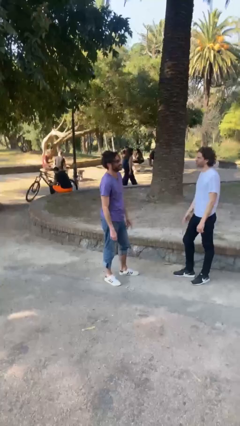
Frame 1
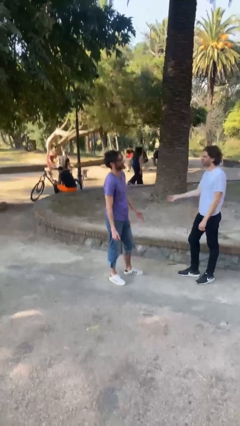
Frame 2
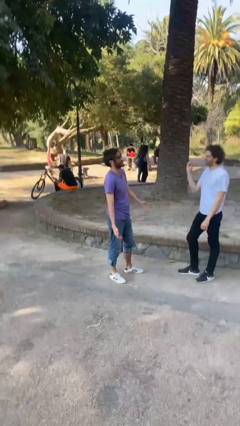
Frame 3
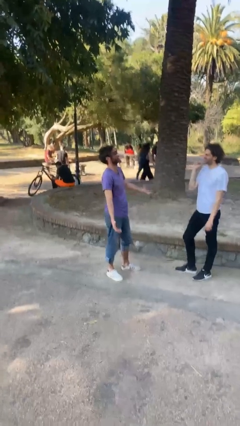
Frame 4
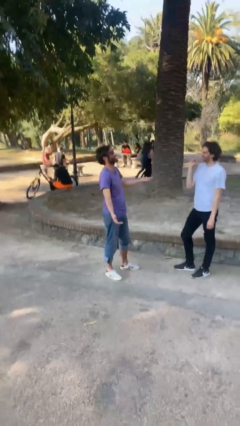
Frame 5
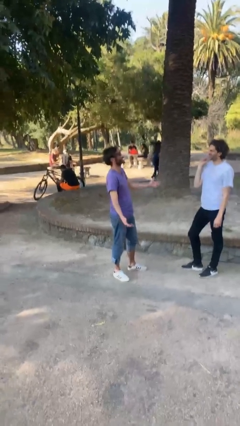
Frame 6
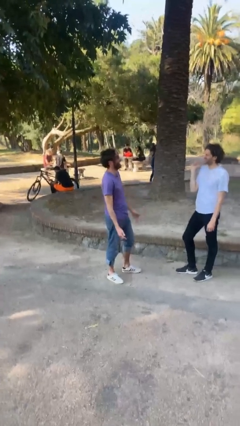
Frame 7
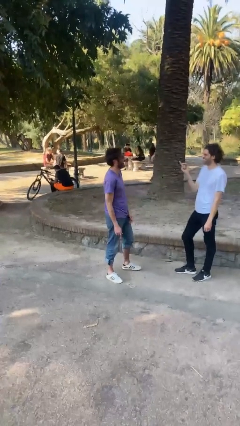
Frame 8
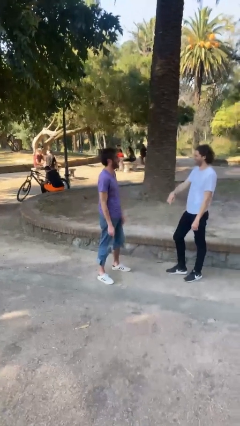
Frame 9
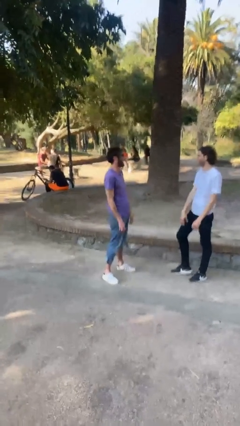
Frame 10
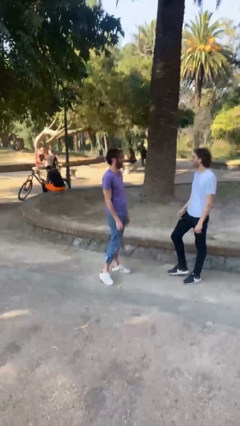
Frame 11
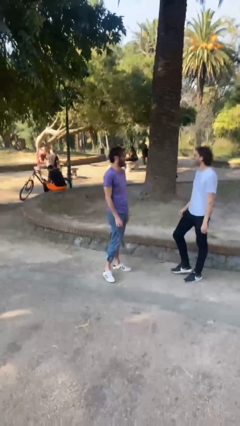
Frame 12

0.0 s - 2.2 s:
person laughs with person

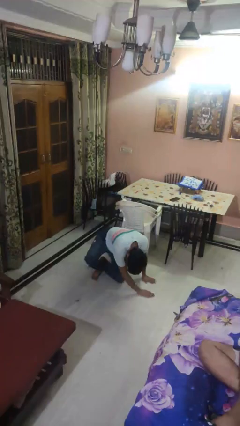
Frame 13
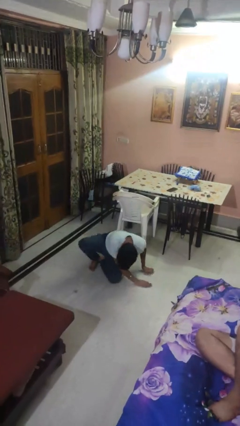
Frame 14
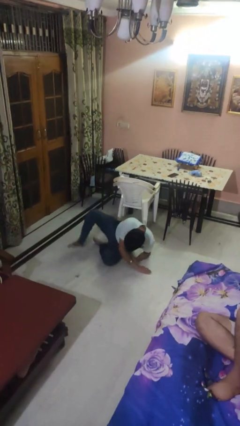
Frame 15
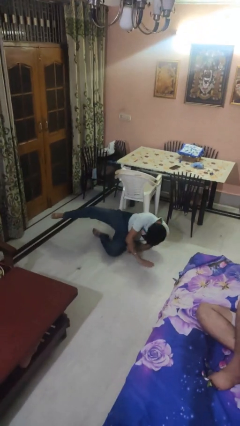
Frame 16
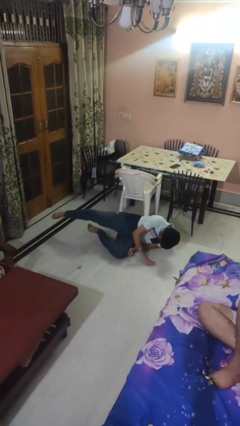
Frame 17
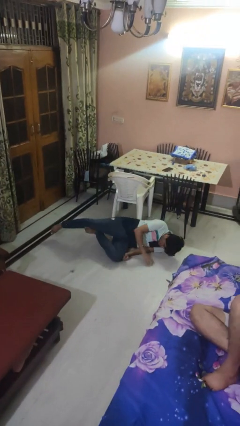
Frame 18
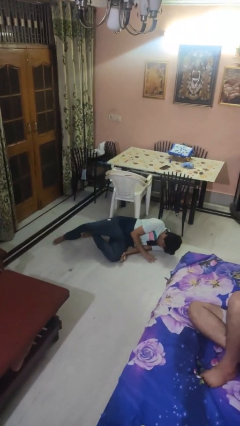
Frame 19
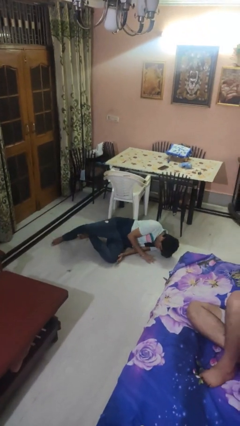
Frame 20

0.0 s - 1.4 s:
person lies down on floor

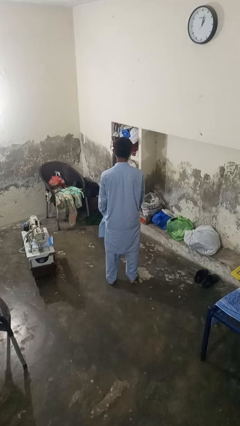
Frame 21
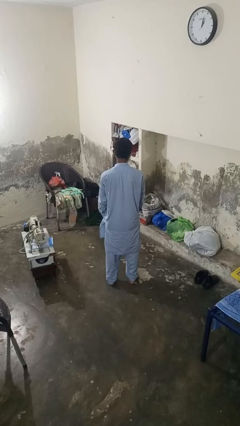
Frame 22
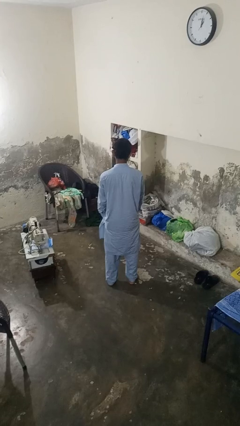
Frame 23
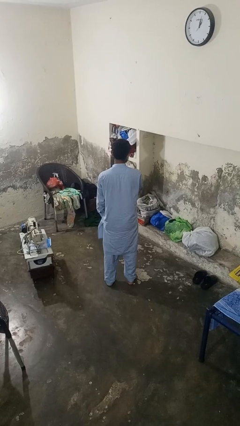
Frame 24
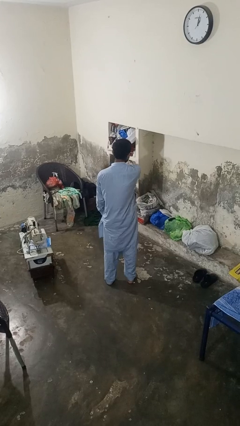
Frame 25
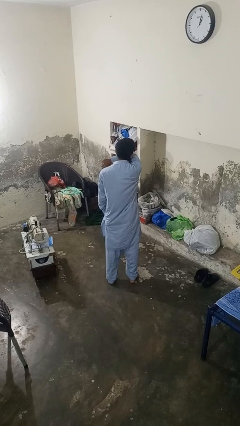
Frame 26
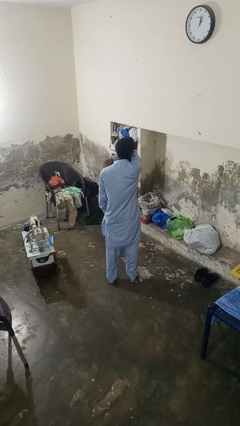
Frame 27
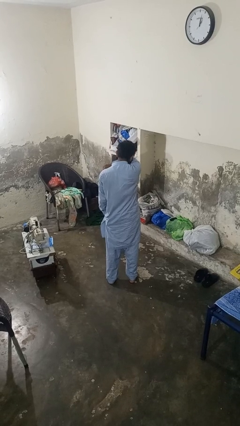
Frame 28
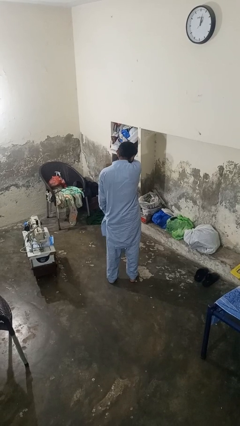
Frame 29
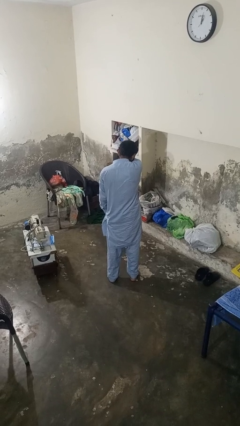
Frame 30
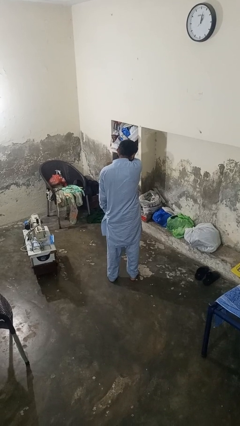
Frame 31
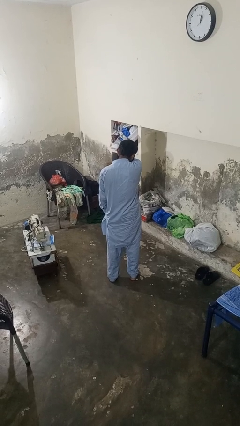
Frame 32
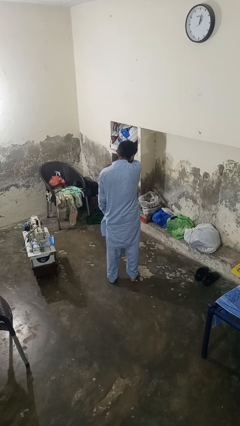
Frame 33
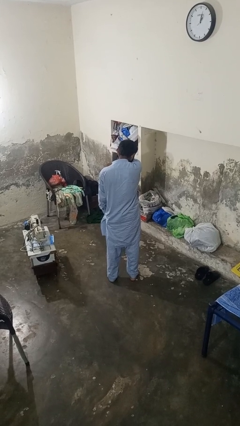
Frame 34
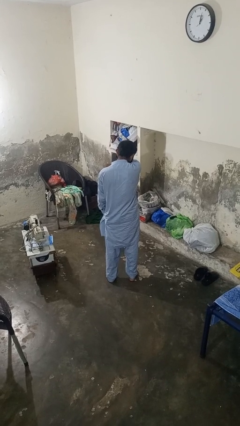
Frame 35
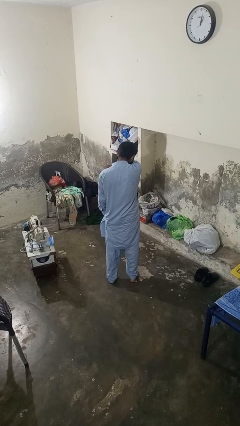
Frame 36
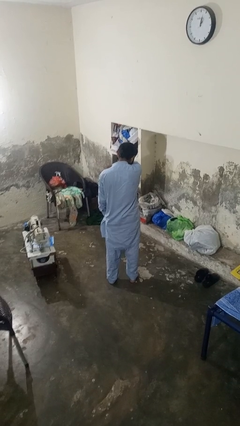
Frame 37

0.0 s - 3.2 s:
person sneezes into arm

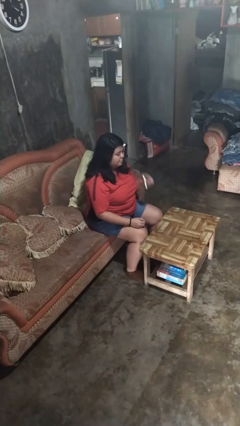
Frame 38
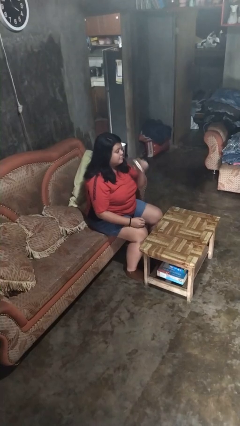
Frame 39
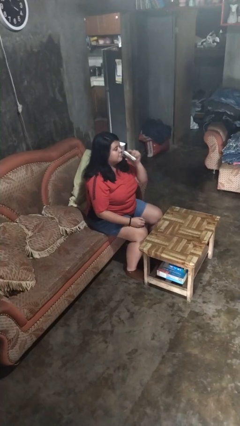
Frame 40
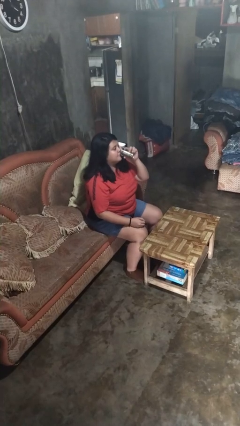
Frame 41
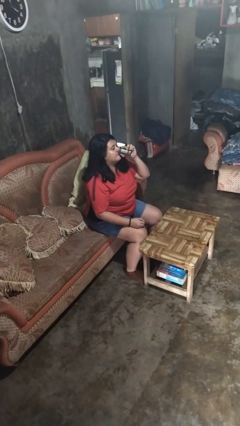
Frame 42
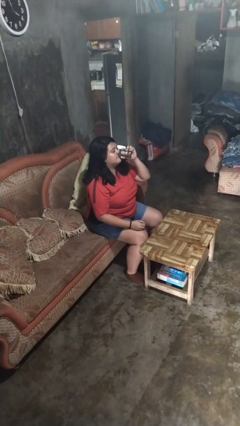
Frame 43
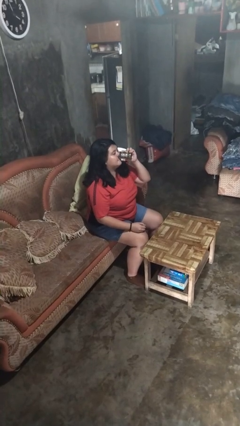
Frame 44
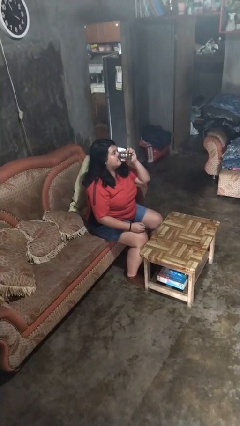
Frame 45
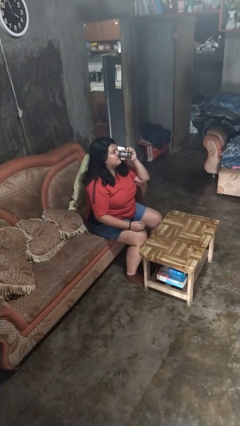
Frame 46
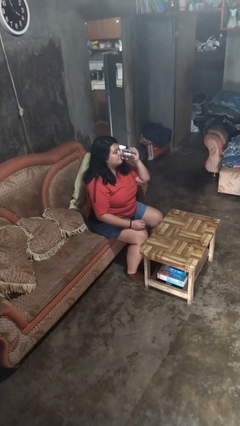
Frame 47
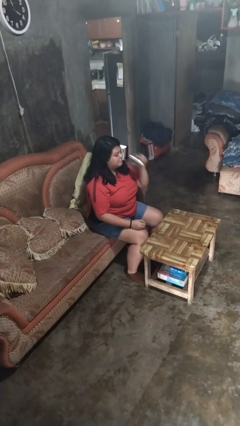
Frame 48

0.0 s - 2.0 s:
person drinks from beverage can

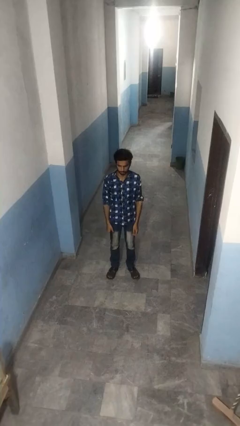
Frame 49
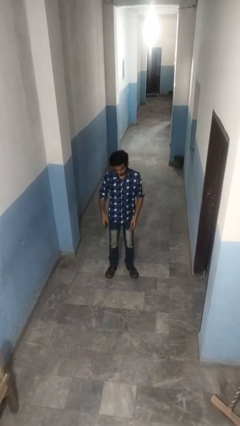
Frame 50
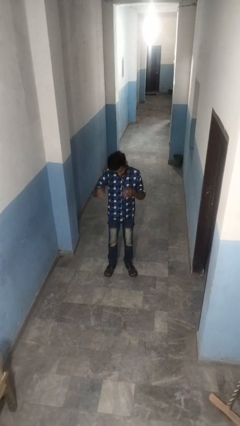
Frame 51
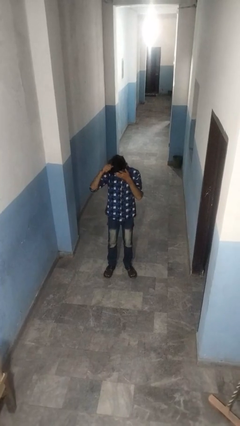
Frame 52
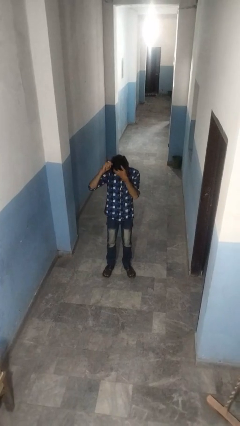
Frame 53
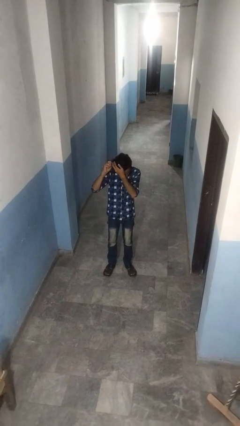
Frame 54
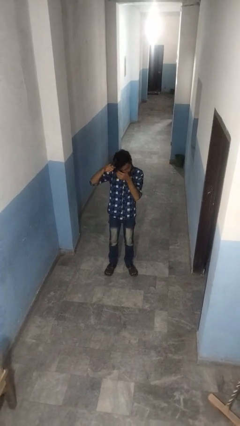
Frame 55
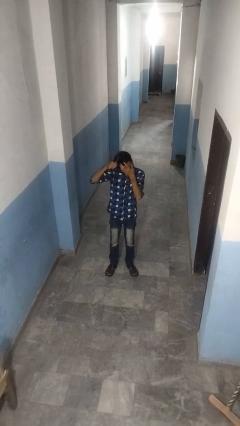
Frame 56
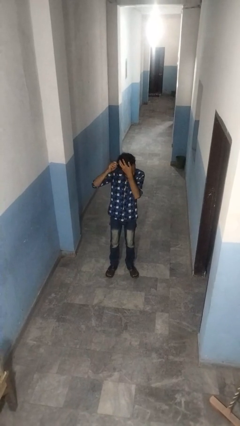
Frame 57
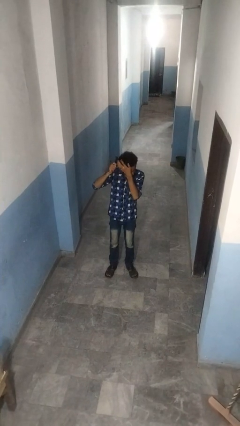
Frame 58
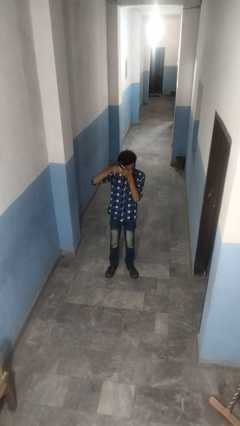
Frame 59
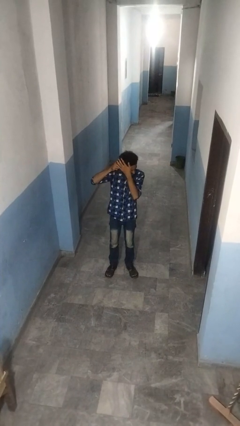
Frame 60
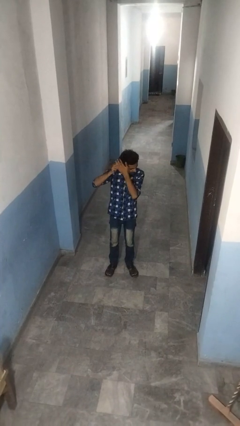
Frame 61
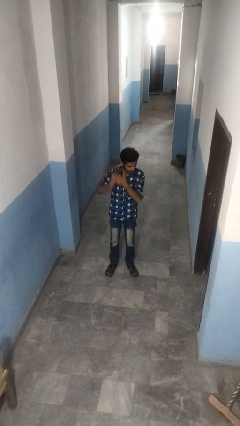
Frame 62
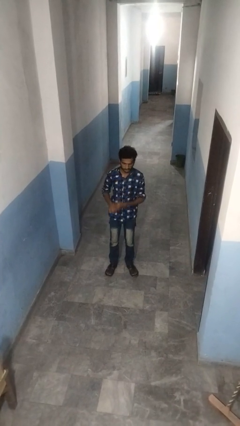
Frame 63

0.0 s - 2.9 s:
person brushes hair

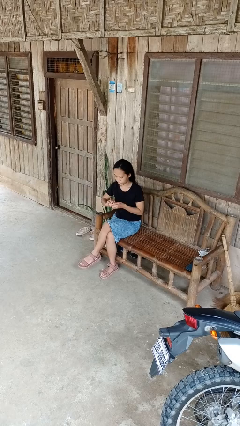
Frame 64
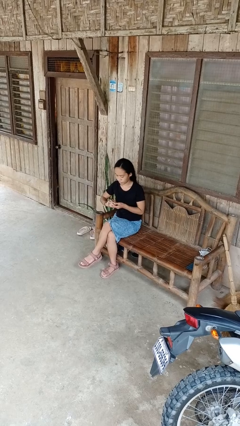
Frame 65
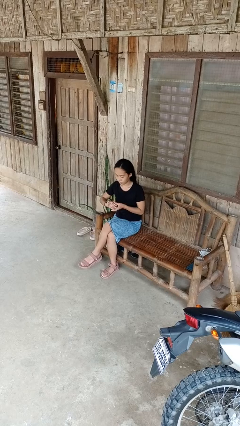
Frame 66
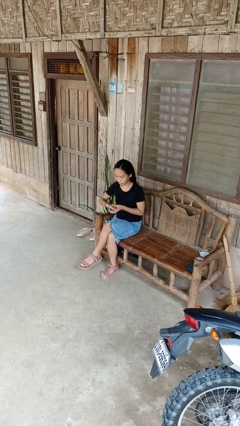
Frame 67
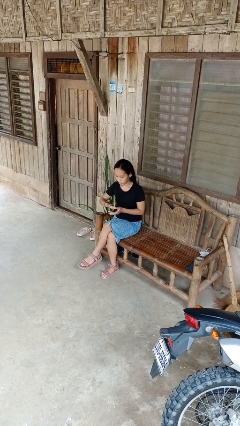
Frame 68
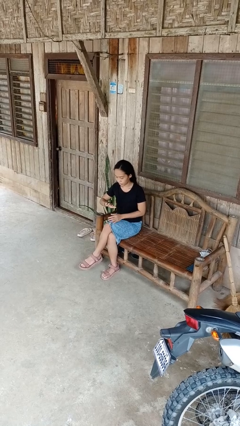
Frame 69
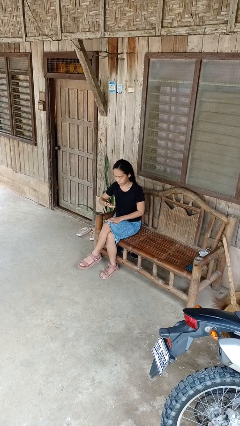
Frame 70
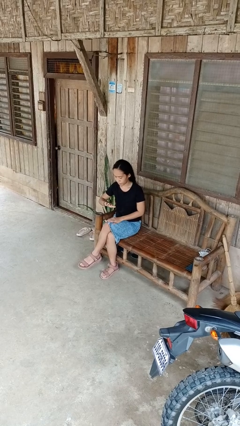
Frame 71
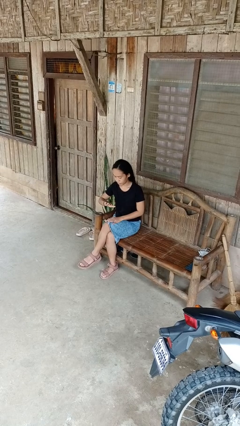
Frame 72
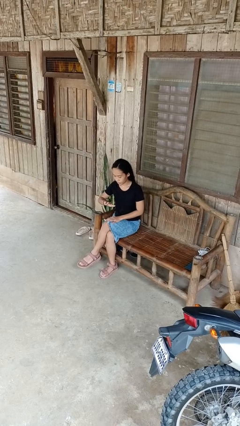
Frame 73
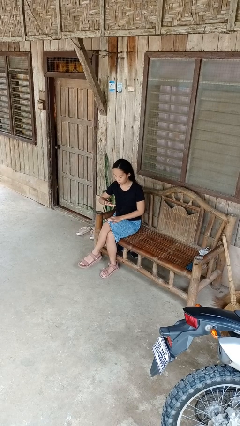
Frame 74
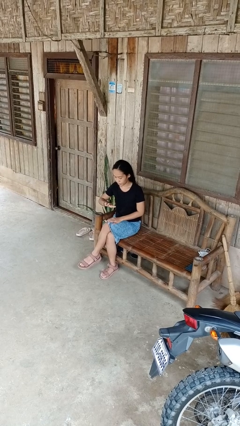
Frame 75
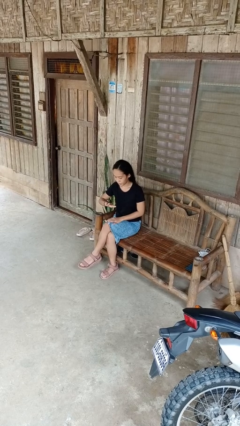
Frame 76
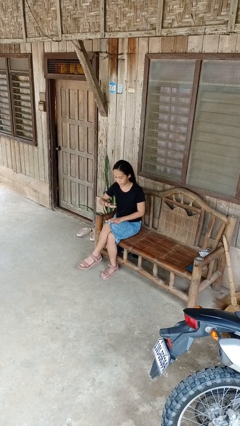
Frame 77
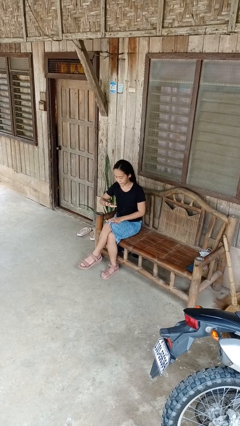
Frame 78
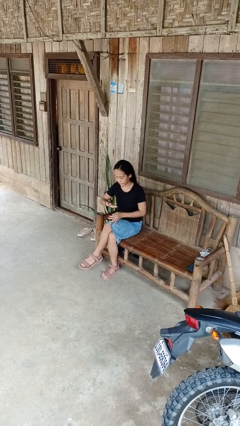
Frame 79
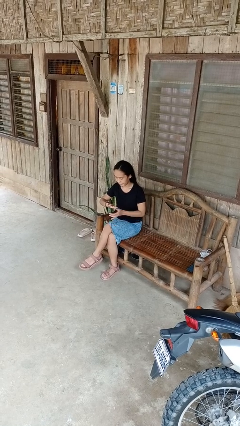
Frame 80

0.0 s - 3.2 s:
person puts on ring

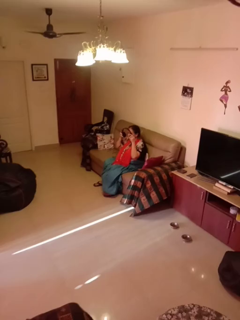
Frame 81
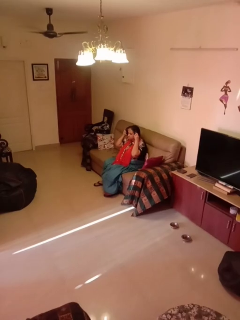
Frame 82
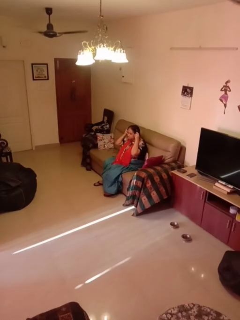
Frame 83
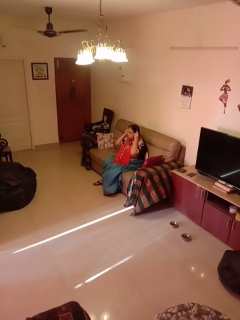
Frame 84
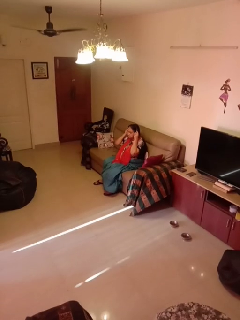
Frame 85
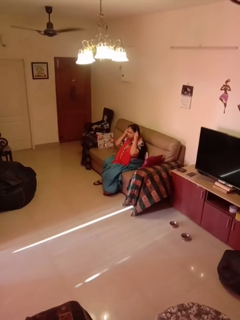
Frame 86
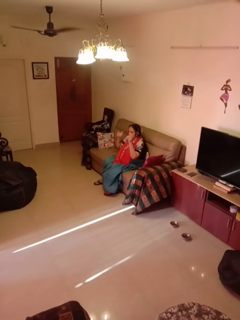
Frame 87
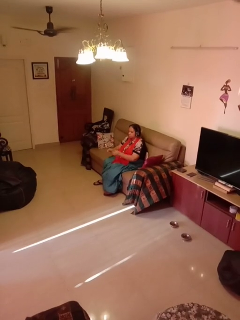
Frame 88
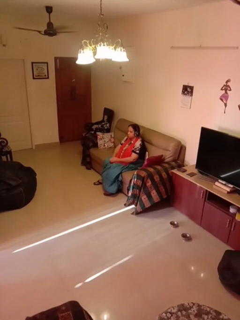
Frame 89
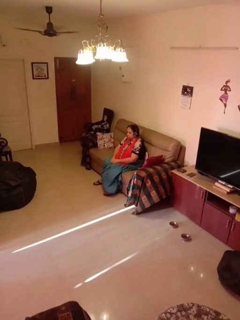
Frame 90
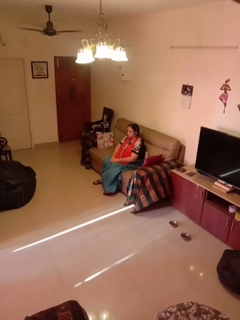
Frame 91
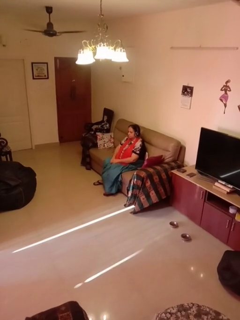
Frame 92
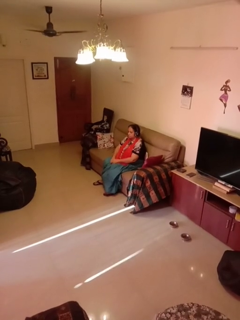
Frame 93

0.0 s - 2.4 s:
person puts on headphones

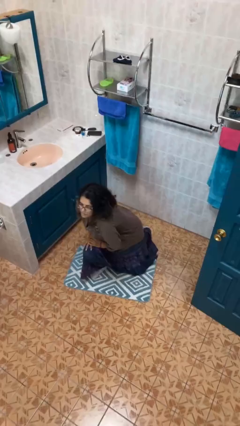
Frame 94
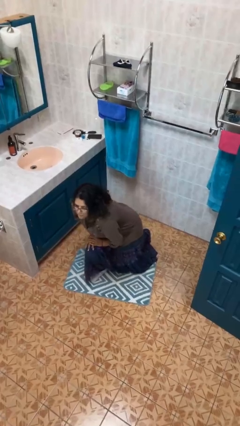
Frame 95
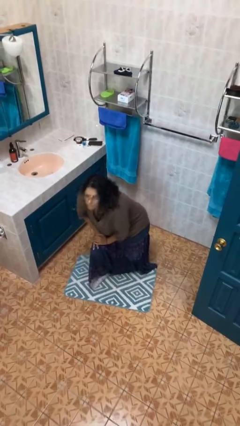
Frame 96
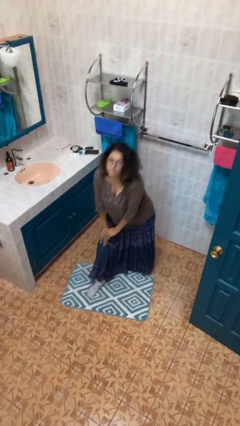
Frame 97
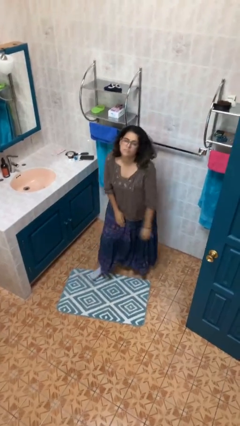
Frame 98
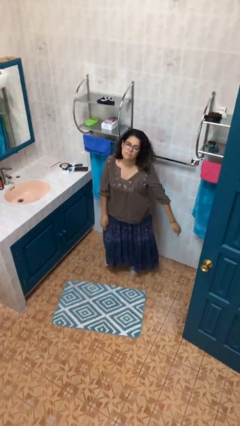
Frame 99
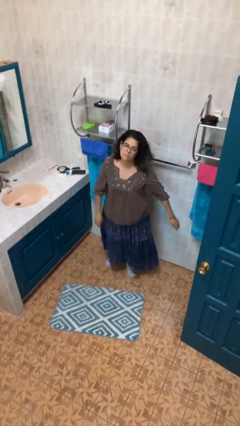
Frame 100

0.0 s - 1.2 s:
person stands up from floor
